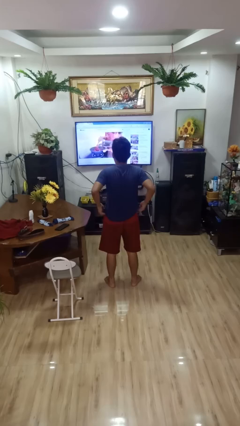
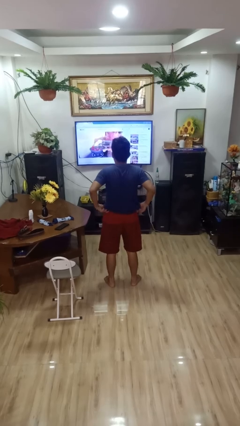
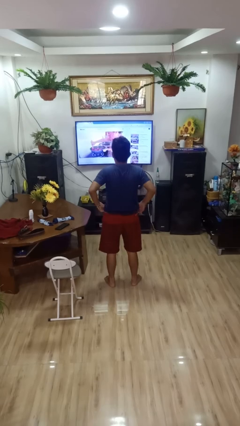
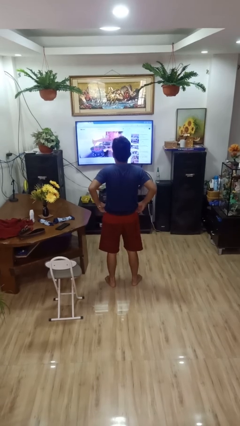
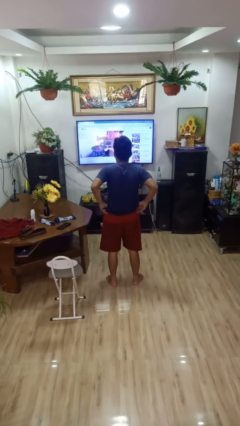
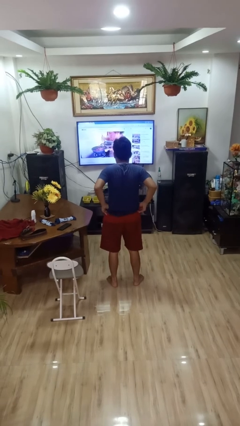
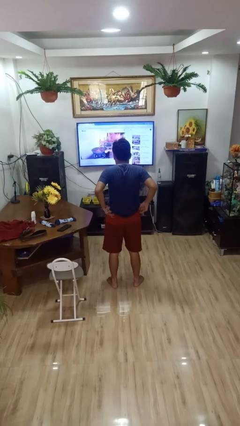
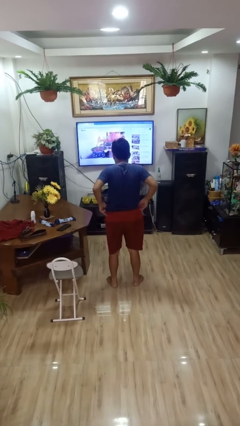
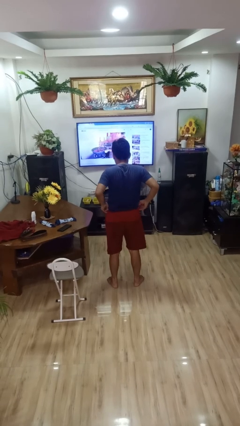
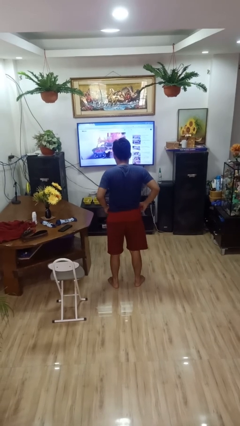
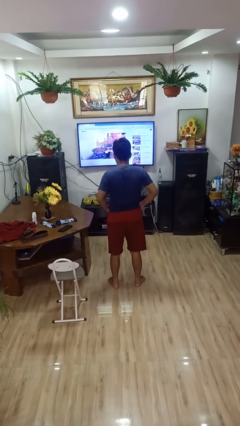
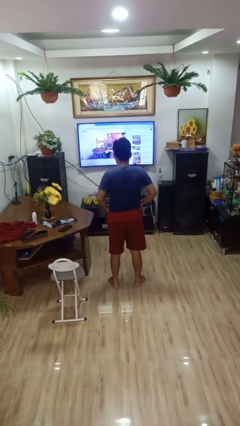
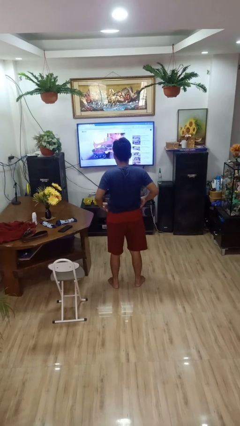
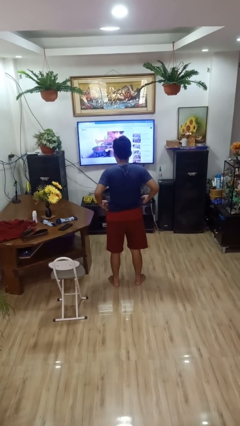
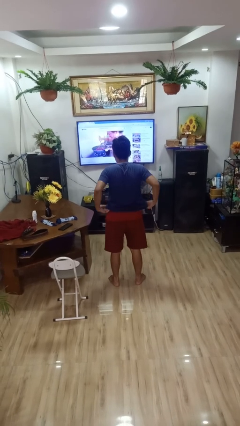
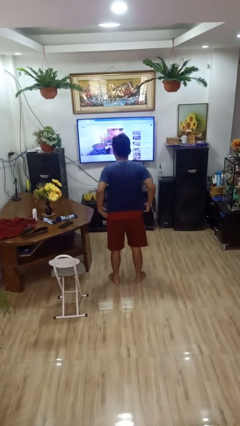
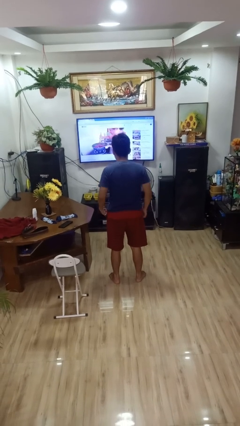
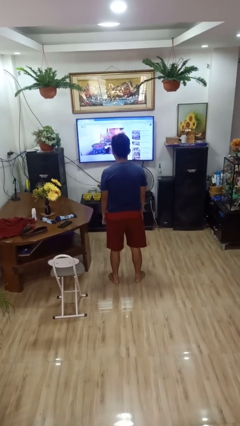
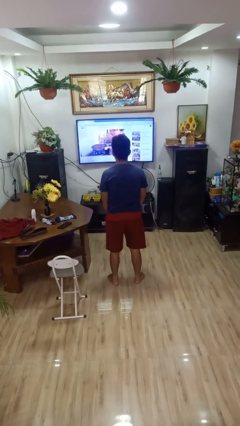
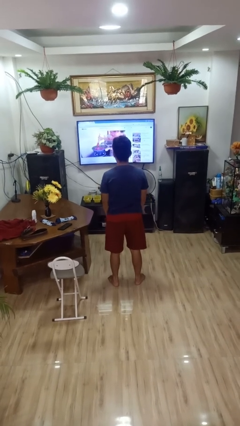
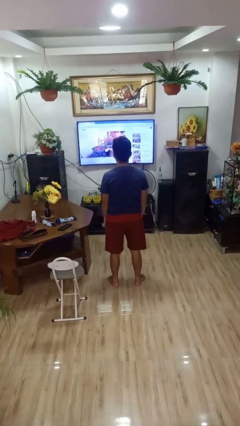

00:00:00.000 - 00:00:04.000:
person hikes up pants

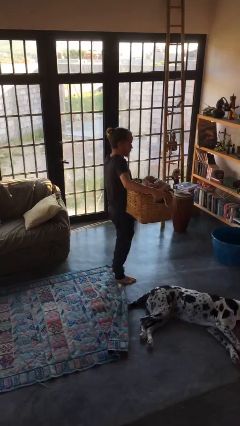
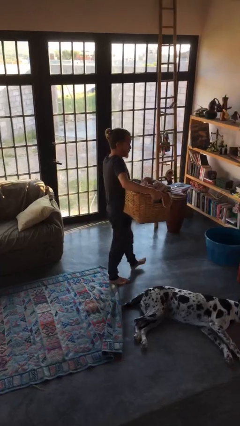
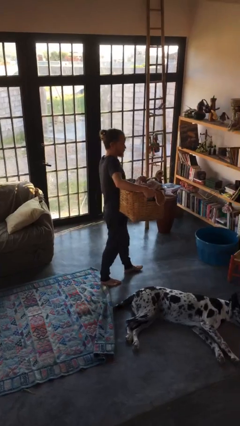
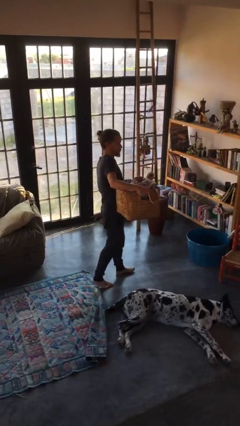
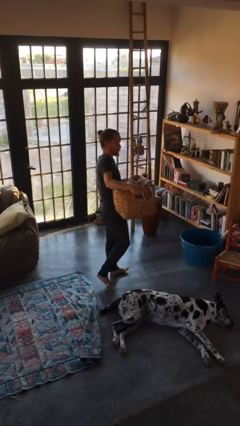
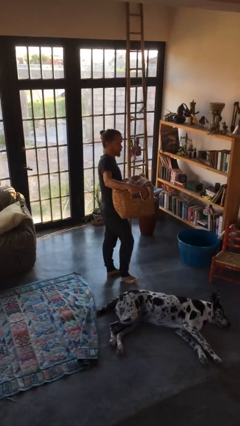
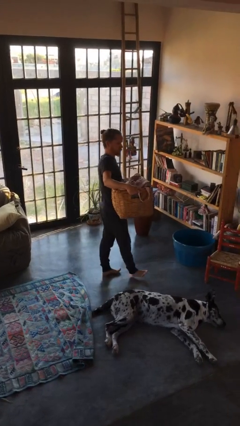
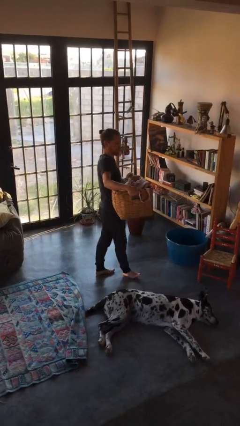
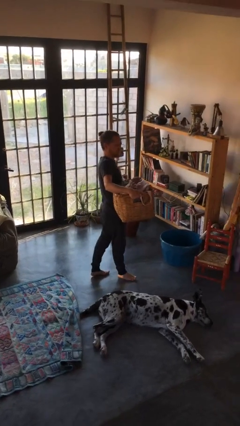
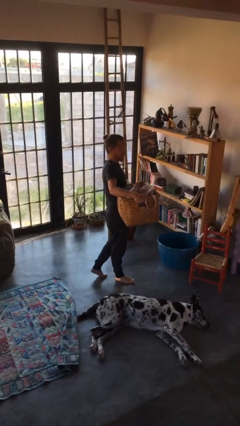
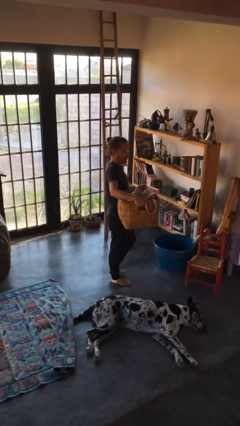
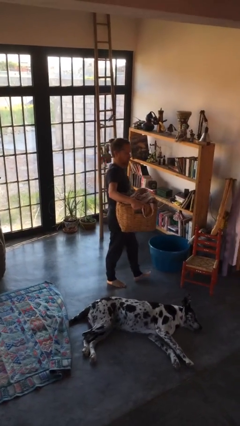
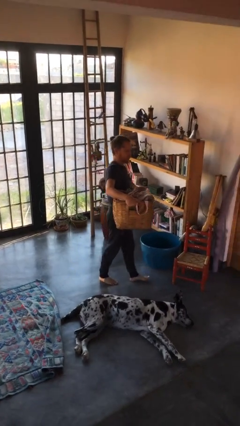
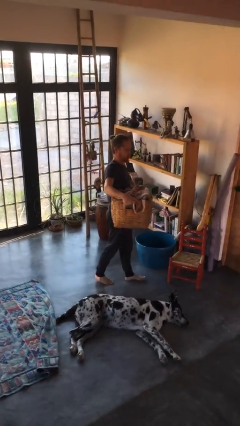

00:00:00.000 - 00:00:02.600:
person carries laundry basket

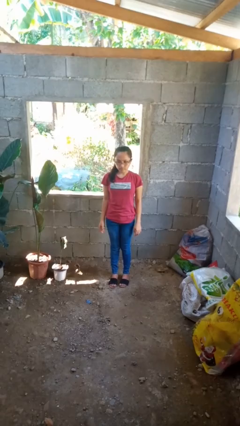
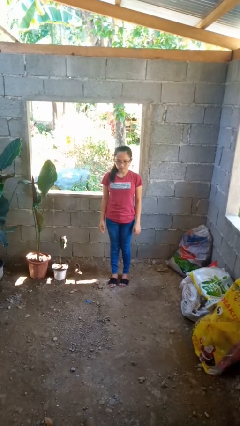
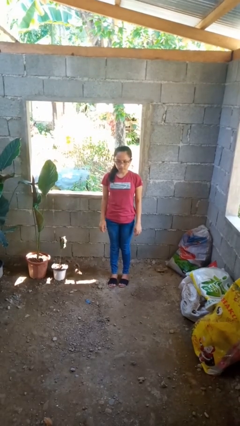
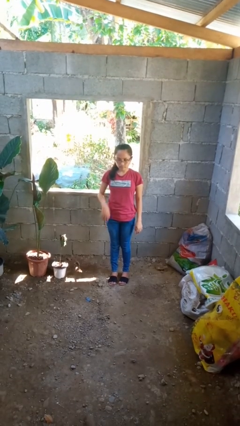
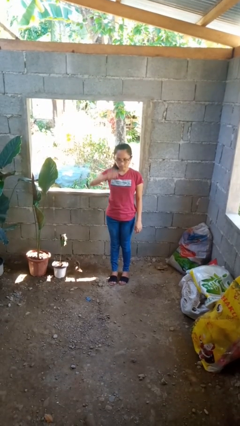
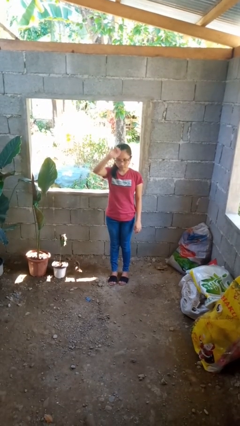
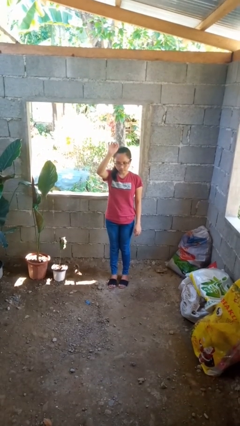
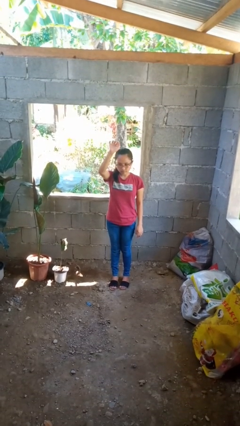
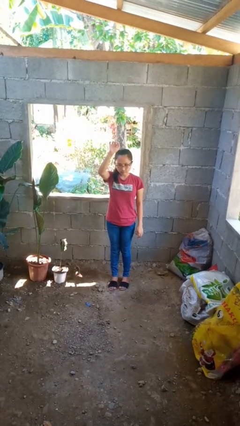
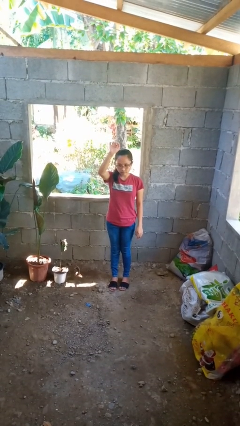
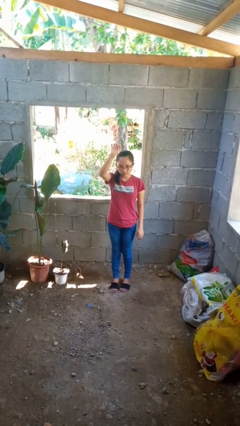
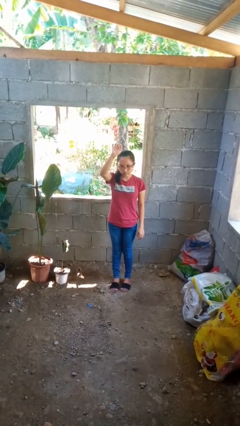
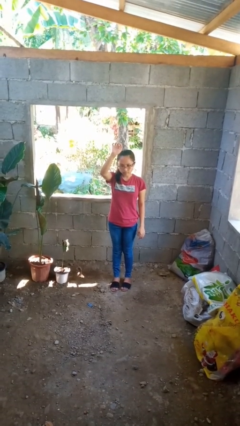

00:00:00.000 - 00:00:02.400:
person gestures raise hand

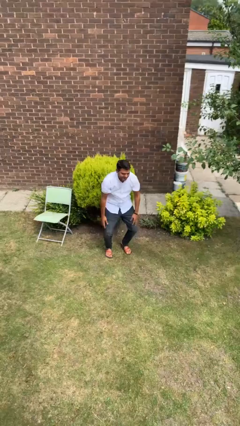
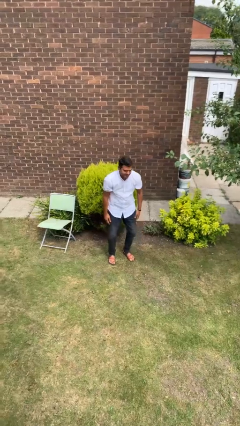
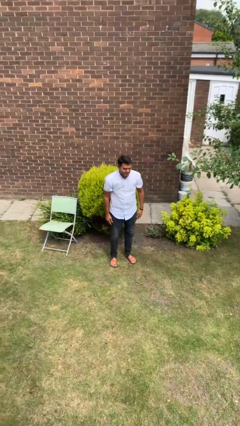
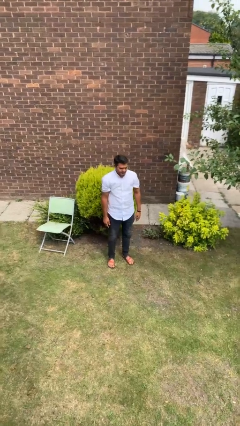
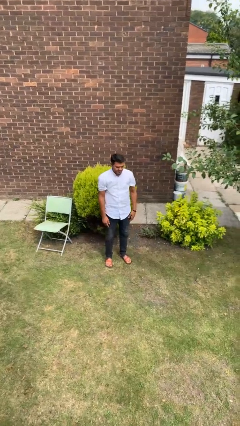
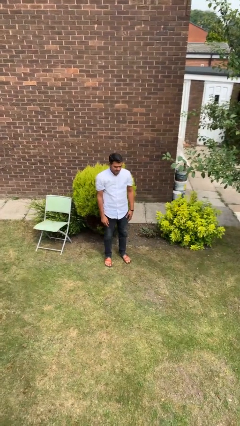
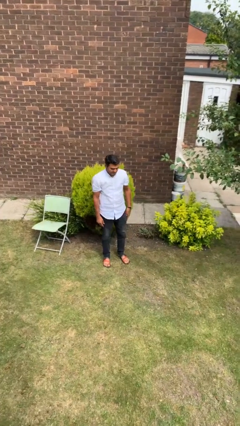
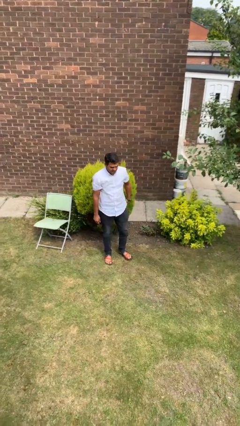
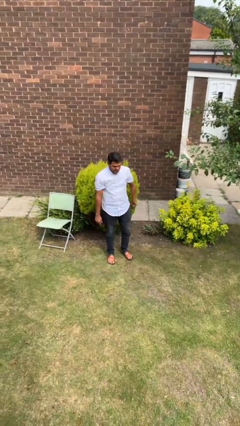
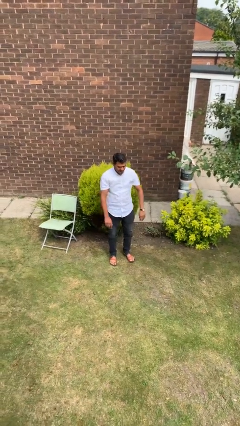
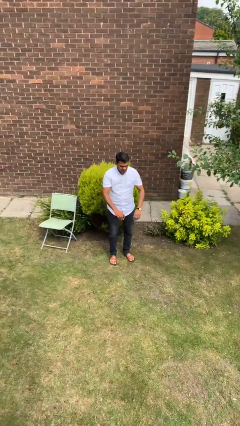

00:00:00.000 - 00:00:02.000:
person stands up

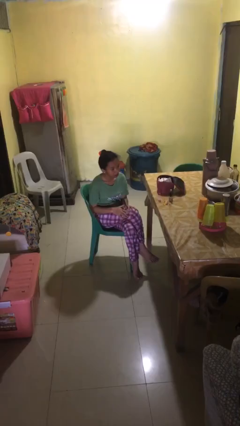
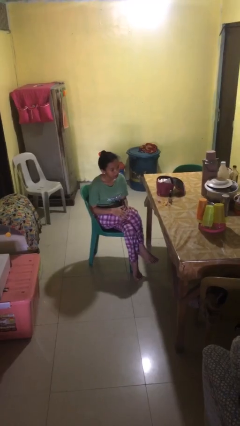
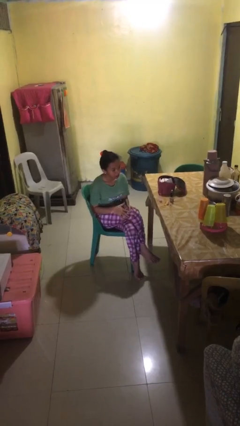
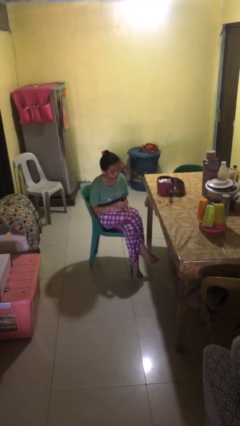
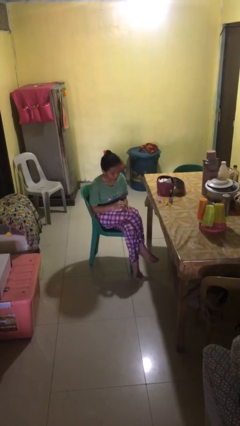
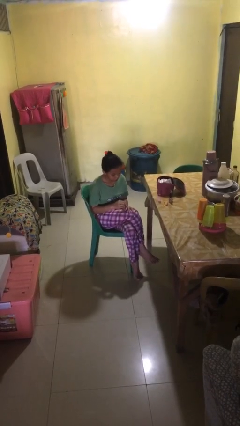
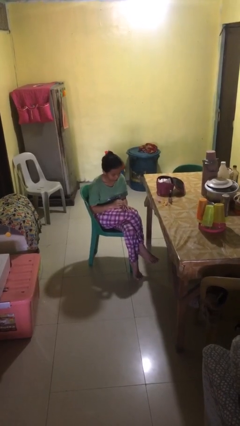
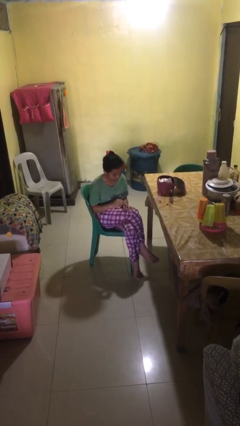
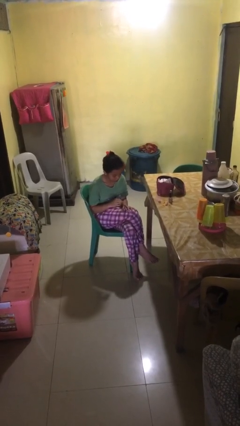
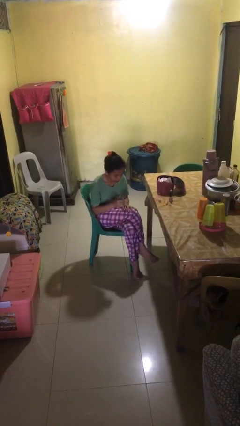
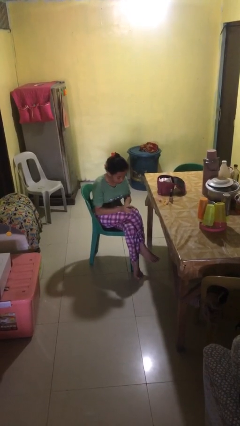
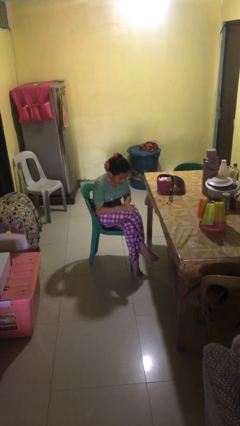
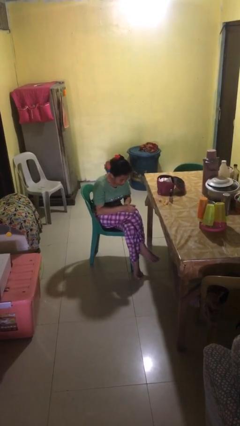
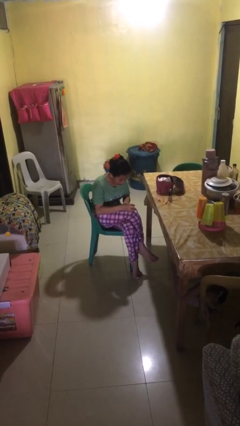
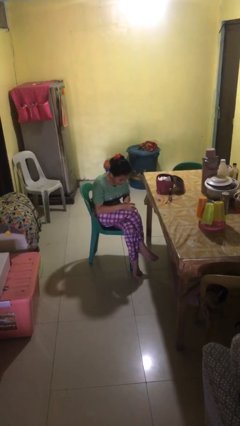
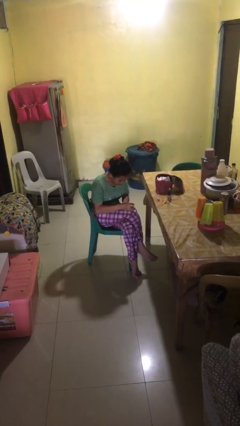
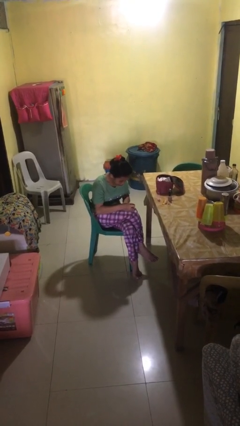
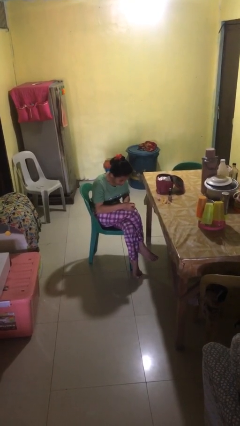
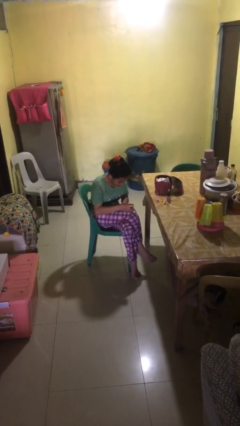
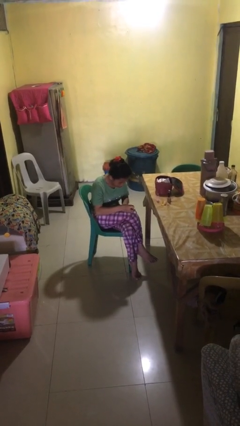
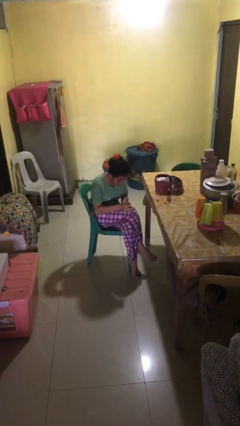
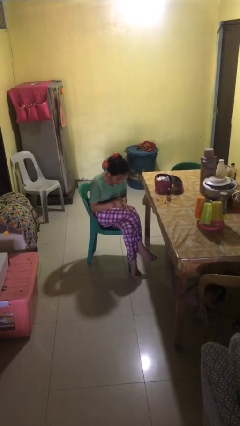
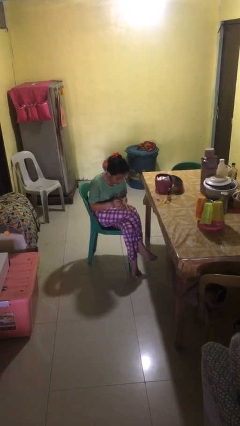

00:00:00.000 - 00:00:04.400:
person paints fingernails

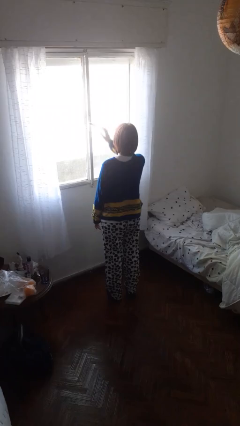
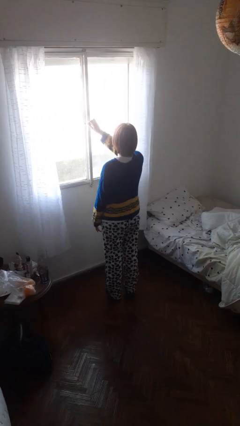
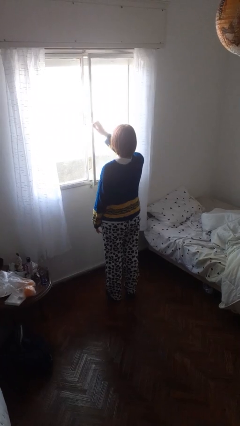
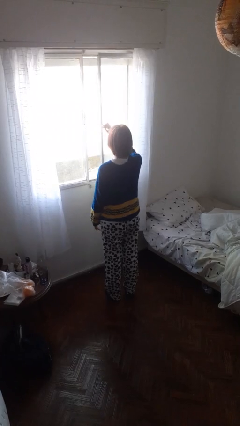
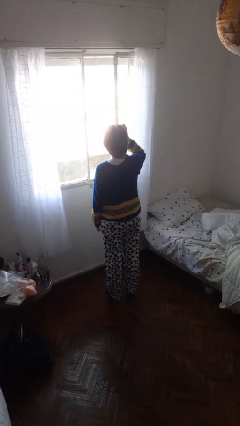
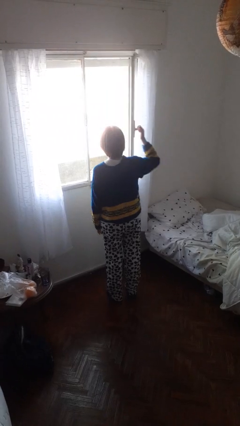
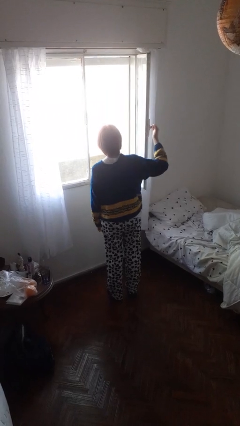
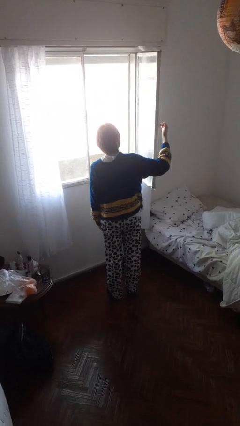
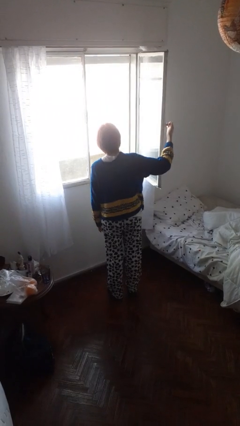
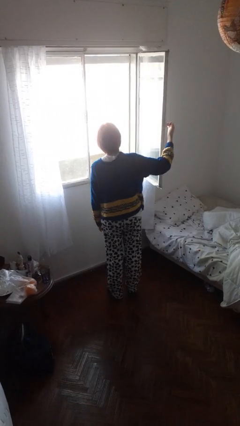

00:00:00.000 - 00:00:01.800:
person opens home window

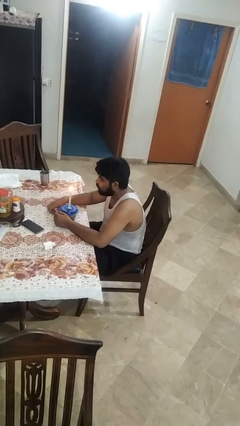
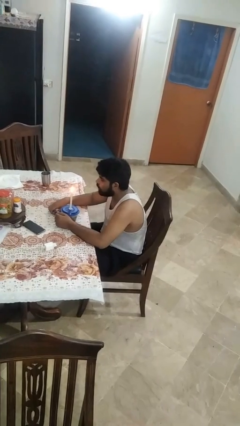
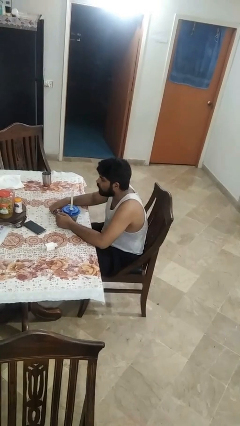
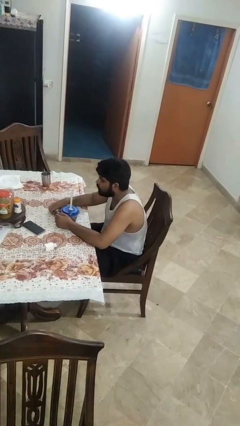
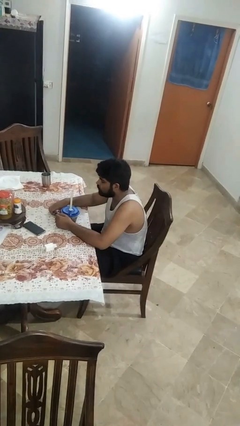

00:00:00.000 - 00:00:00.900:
person extinguishes candle
